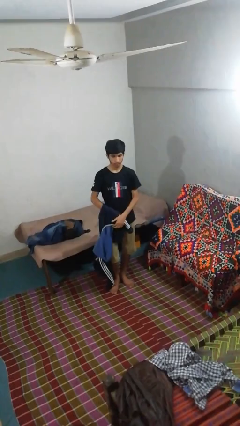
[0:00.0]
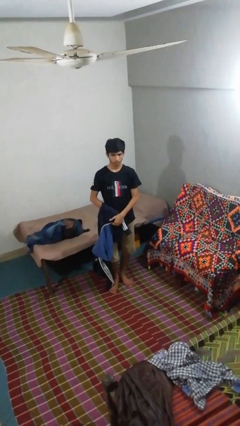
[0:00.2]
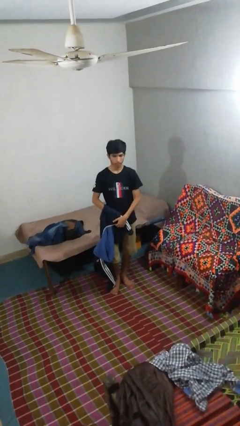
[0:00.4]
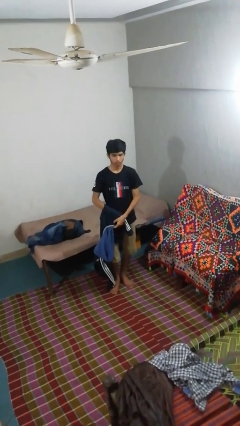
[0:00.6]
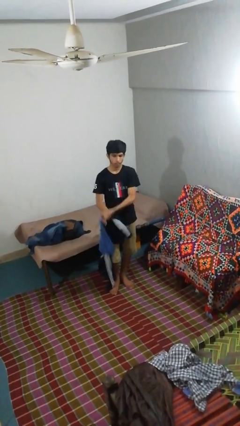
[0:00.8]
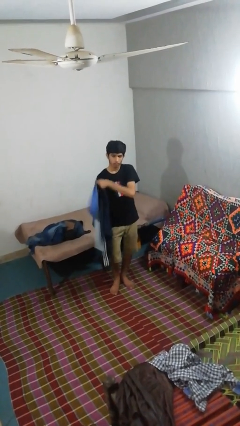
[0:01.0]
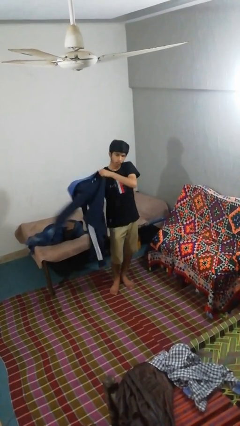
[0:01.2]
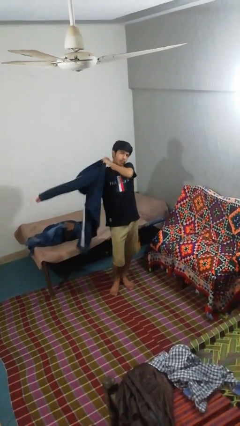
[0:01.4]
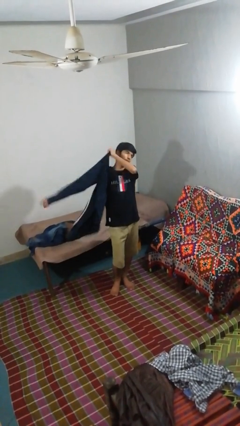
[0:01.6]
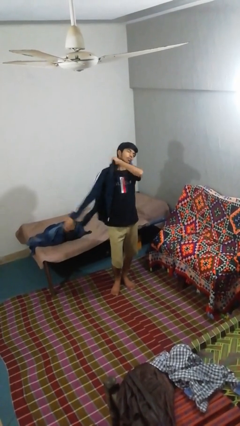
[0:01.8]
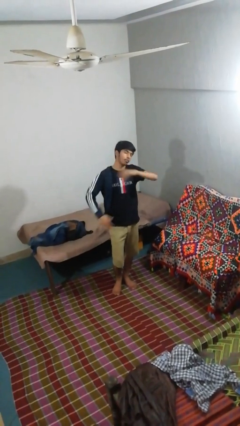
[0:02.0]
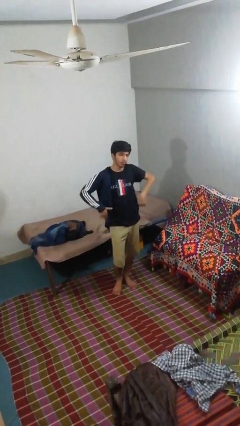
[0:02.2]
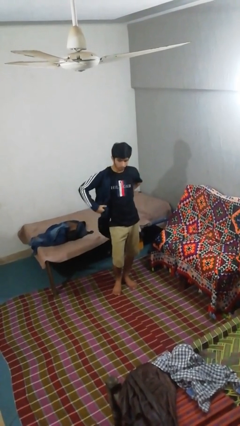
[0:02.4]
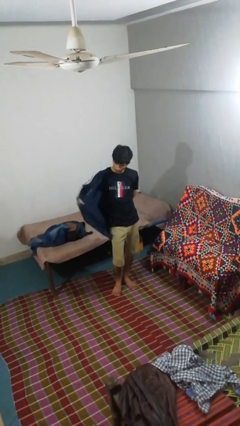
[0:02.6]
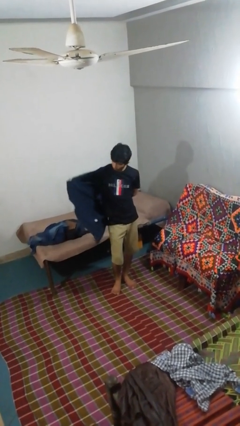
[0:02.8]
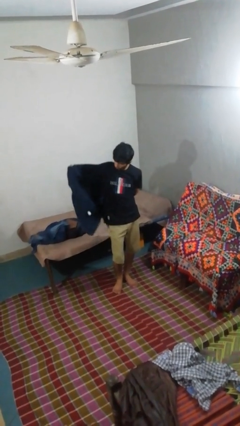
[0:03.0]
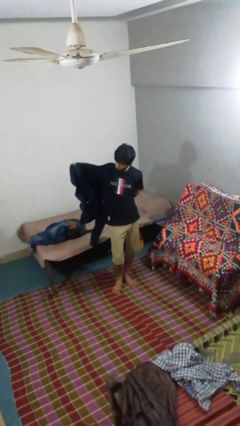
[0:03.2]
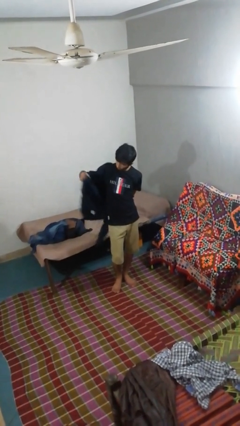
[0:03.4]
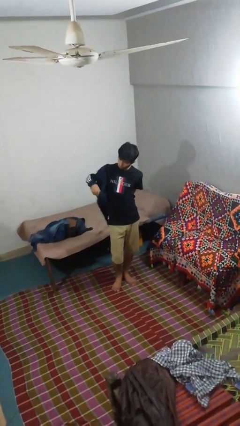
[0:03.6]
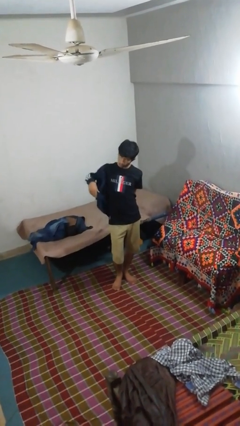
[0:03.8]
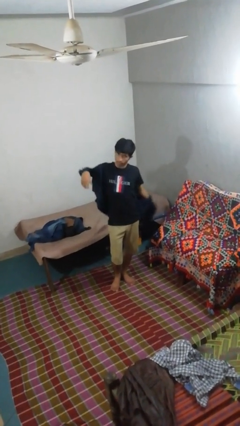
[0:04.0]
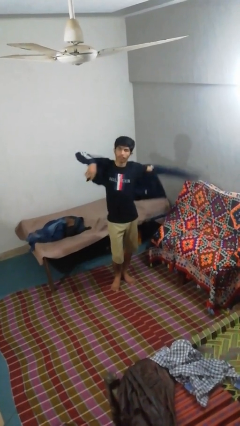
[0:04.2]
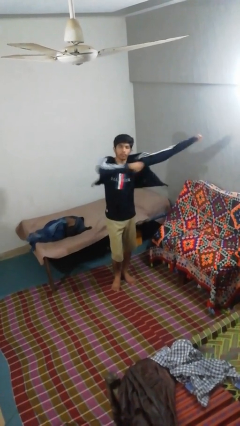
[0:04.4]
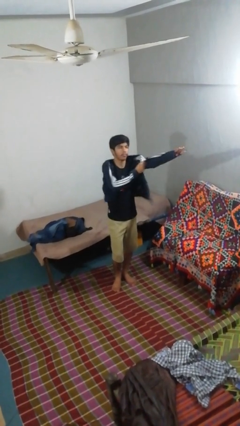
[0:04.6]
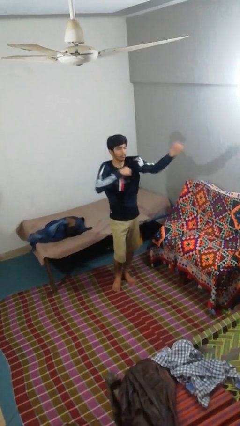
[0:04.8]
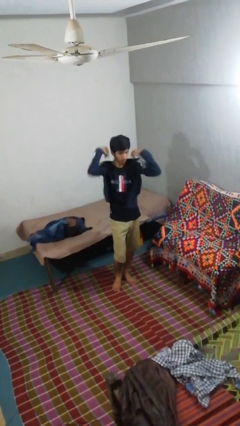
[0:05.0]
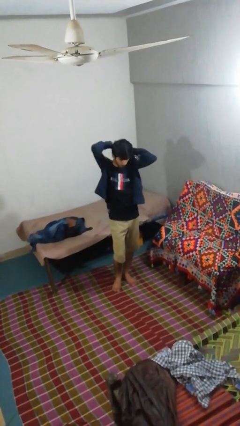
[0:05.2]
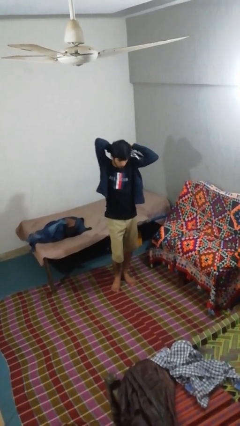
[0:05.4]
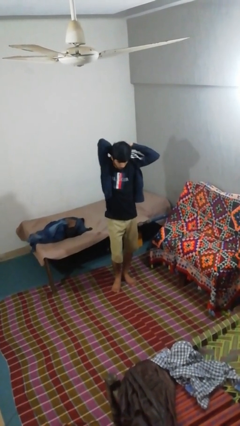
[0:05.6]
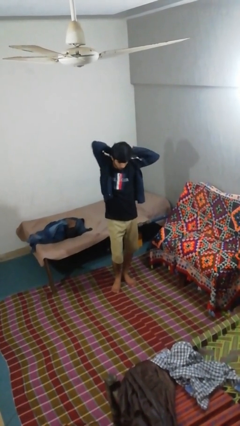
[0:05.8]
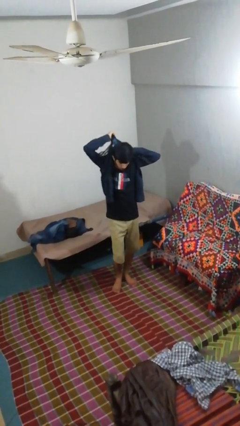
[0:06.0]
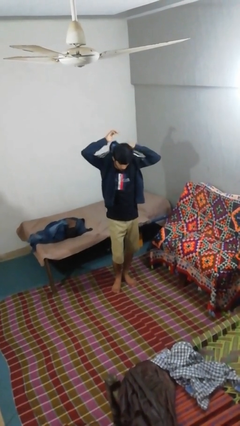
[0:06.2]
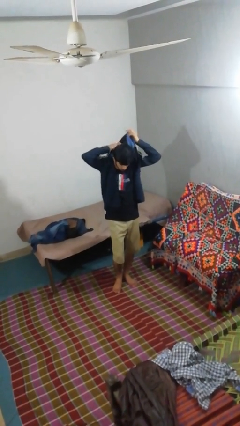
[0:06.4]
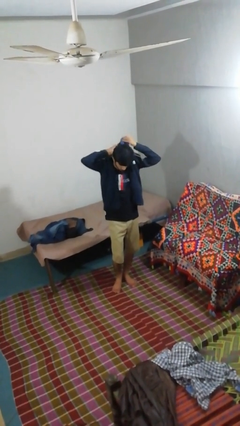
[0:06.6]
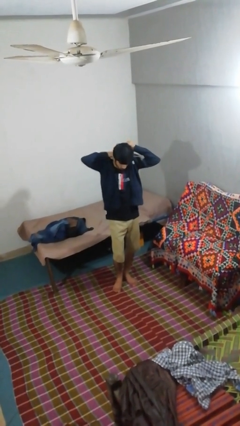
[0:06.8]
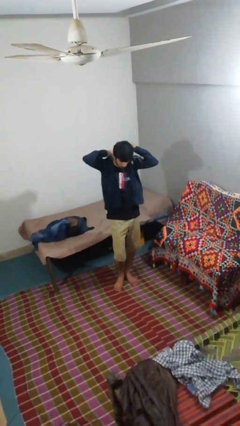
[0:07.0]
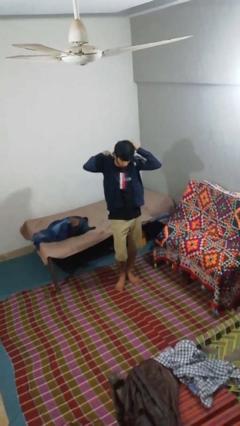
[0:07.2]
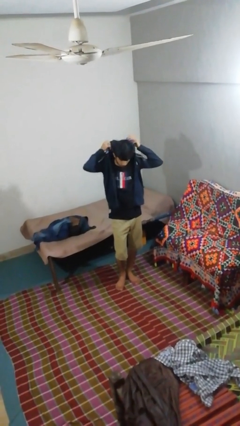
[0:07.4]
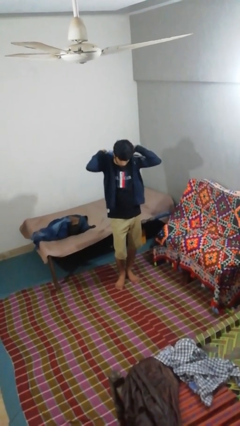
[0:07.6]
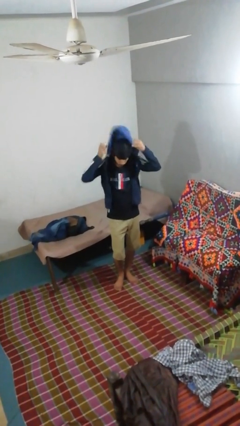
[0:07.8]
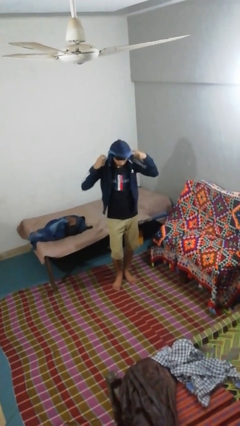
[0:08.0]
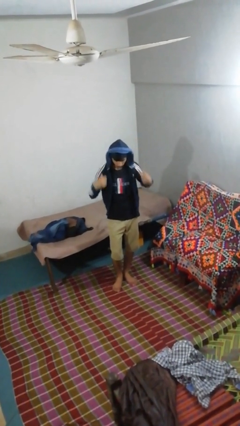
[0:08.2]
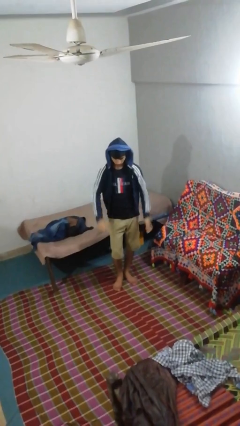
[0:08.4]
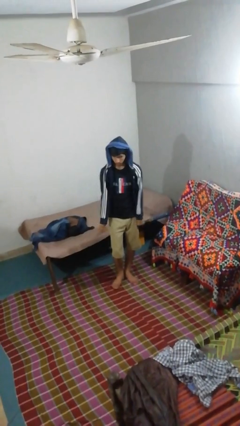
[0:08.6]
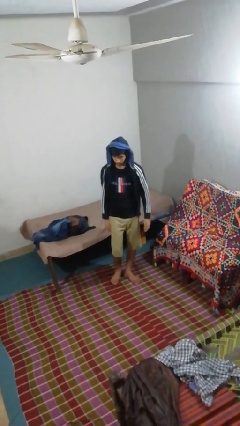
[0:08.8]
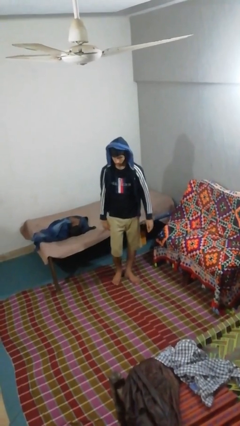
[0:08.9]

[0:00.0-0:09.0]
person puts on hoodie

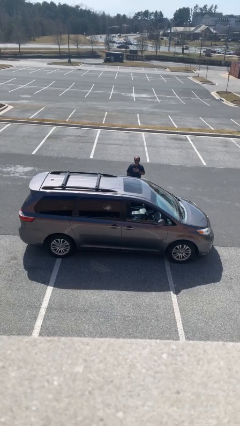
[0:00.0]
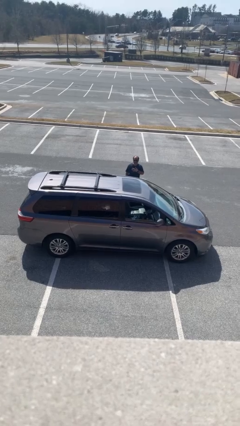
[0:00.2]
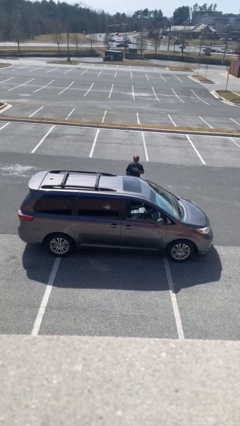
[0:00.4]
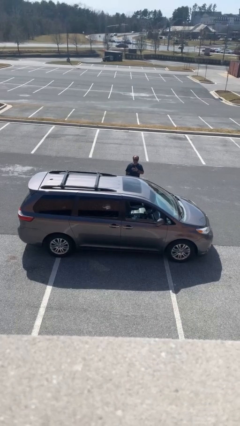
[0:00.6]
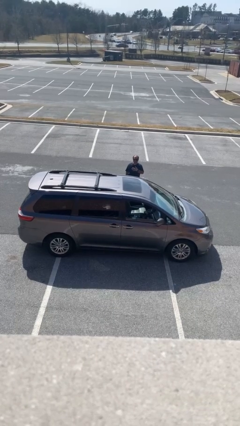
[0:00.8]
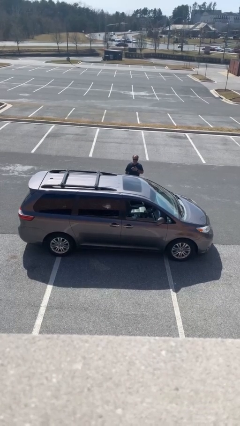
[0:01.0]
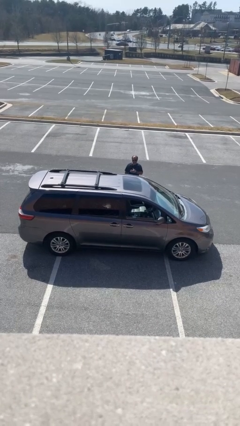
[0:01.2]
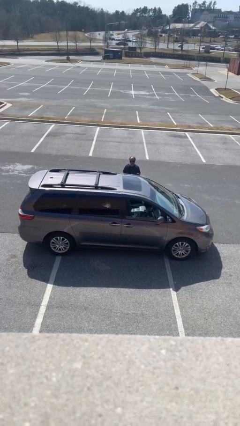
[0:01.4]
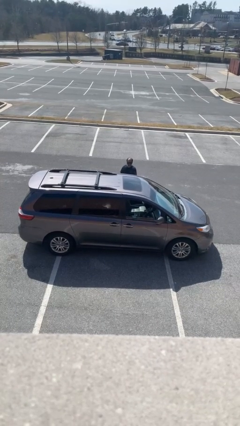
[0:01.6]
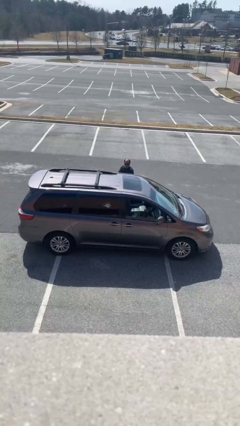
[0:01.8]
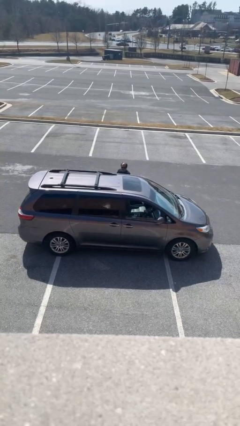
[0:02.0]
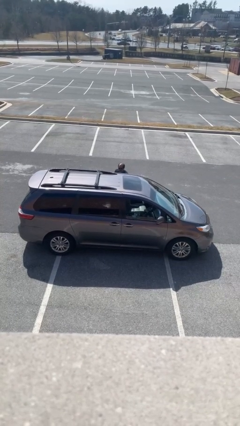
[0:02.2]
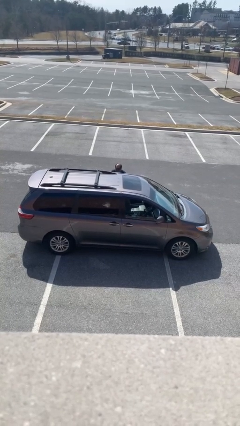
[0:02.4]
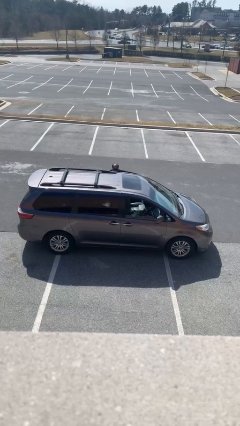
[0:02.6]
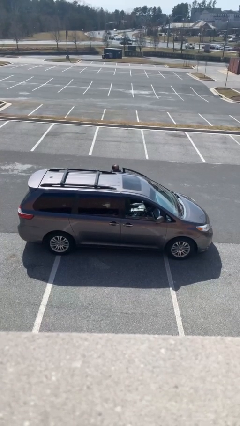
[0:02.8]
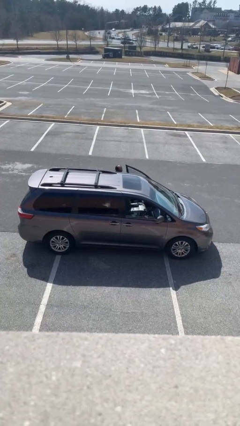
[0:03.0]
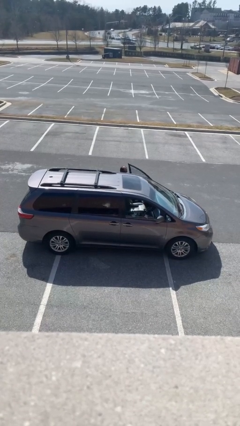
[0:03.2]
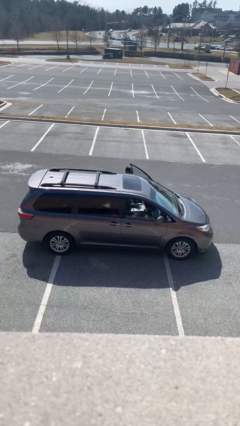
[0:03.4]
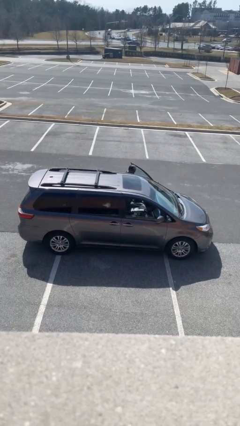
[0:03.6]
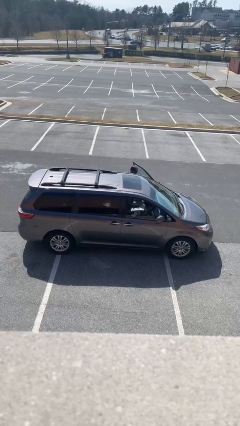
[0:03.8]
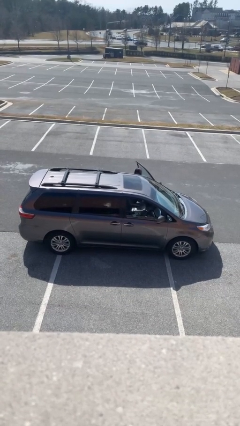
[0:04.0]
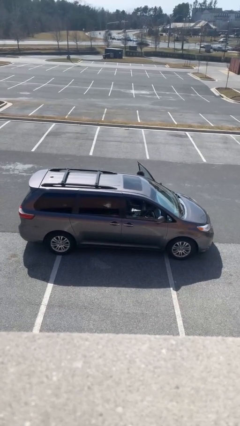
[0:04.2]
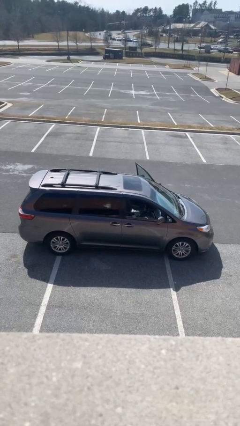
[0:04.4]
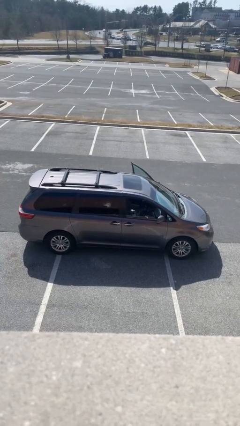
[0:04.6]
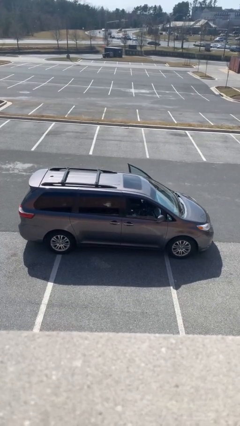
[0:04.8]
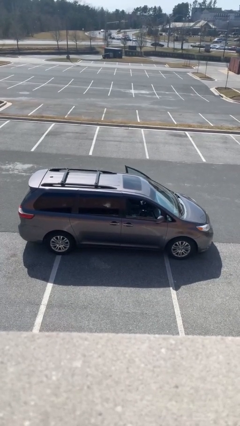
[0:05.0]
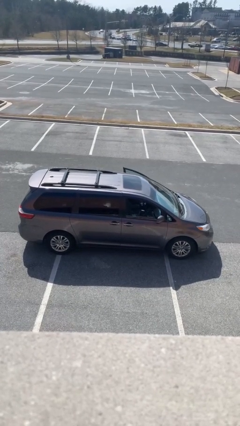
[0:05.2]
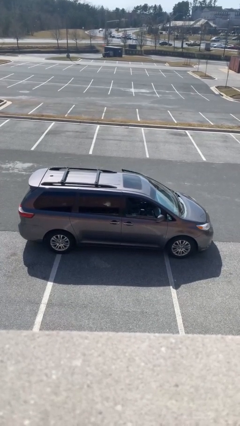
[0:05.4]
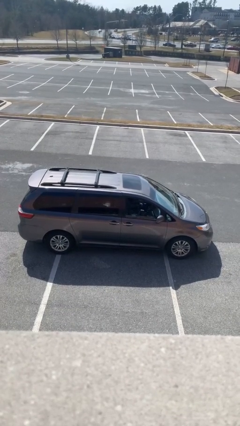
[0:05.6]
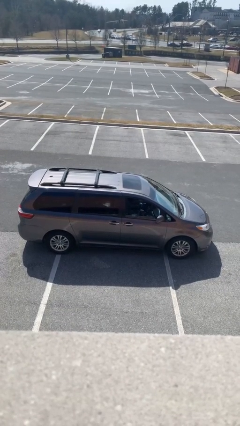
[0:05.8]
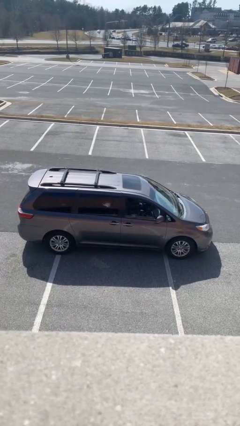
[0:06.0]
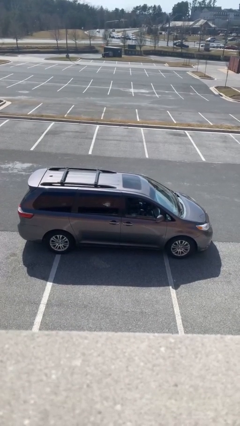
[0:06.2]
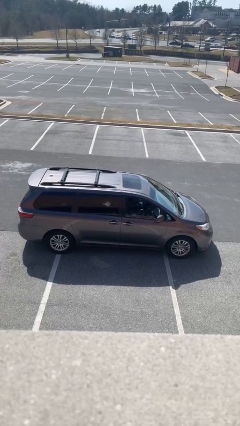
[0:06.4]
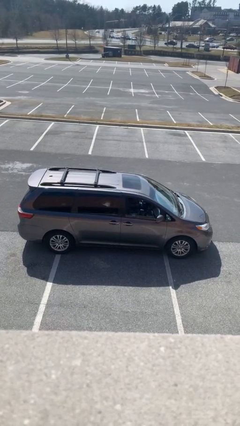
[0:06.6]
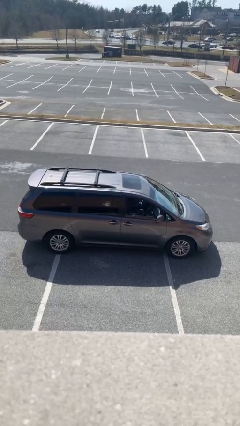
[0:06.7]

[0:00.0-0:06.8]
car picks up person

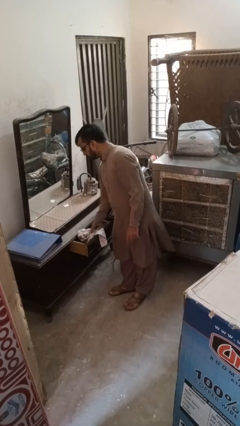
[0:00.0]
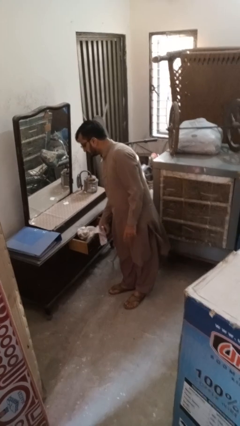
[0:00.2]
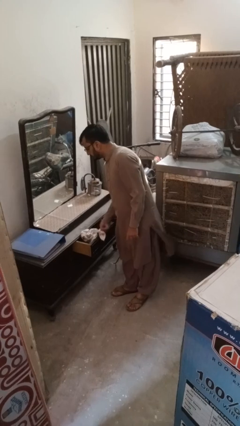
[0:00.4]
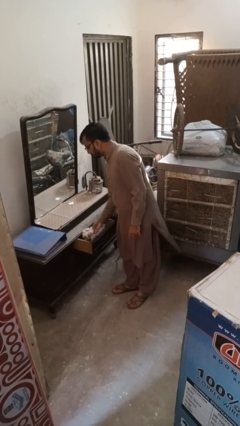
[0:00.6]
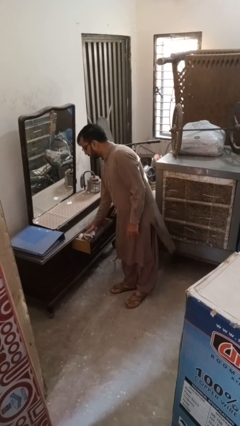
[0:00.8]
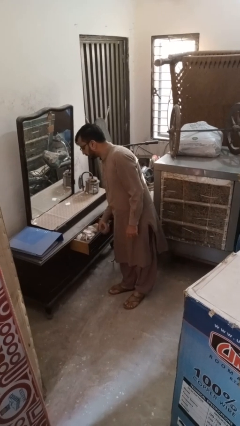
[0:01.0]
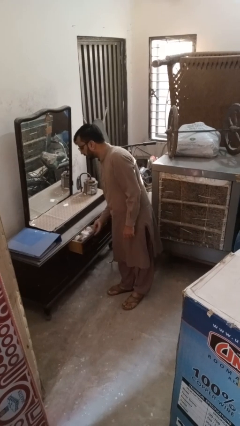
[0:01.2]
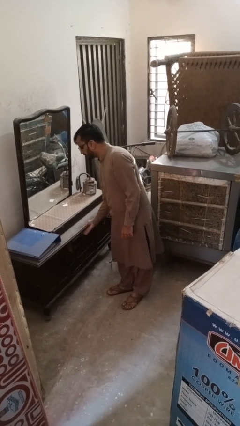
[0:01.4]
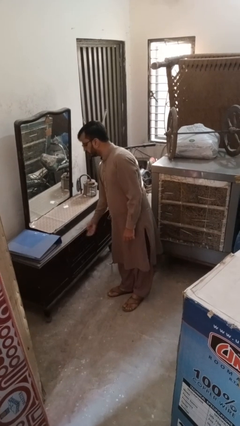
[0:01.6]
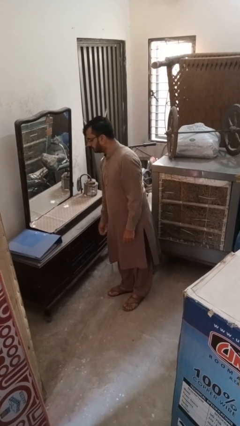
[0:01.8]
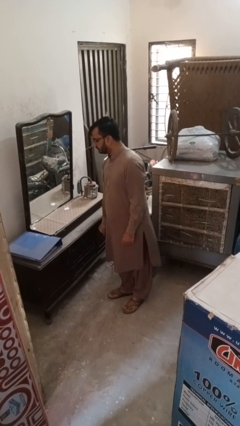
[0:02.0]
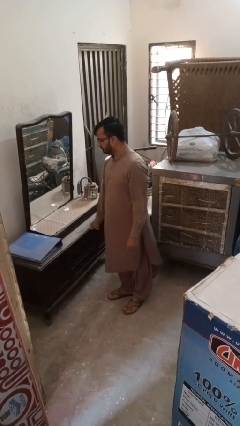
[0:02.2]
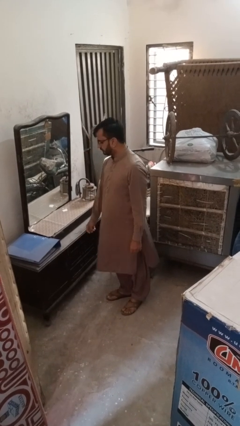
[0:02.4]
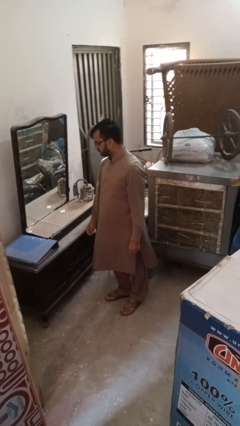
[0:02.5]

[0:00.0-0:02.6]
person puts clothes into dresser
